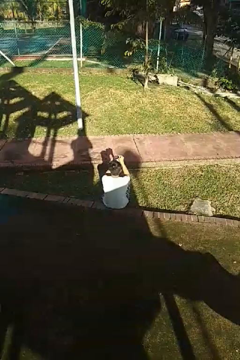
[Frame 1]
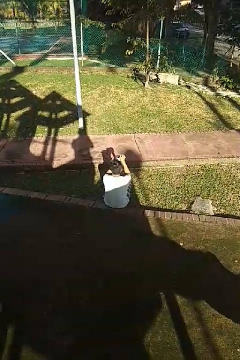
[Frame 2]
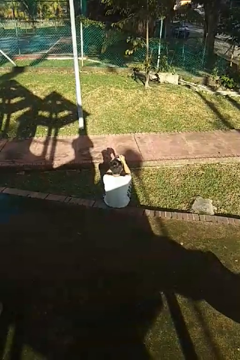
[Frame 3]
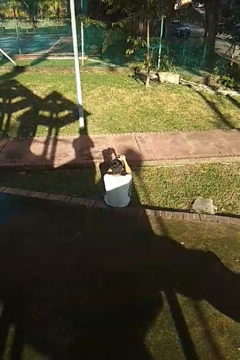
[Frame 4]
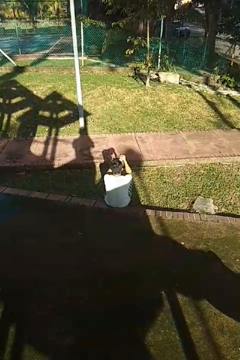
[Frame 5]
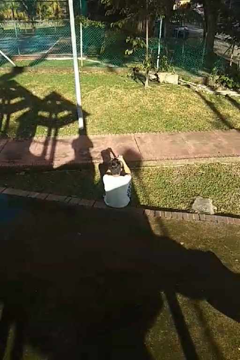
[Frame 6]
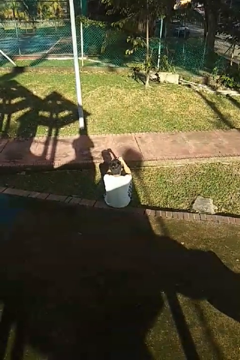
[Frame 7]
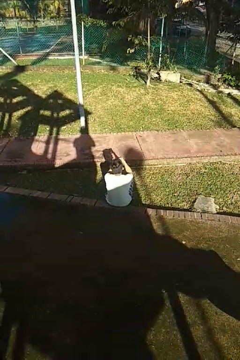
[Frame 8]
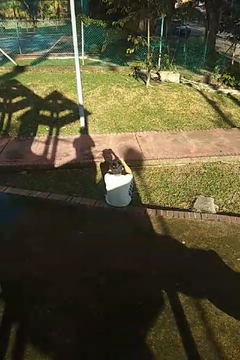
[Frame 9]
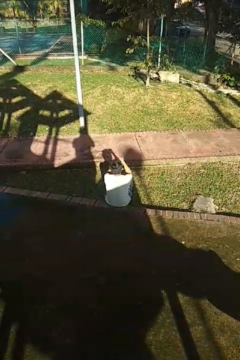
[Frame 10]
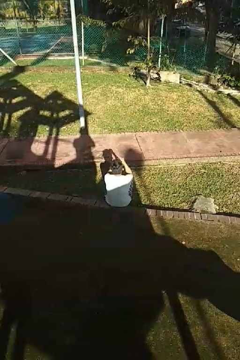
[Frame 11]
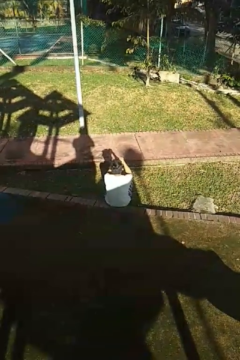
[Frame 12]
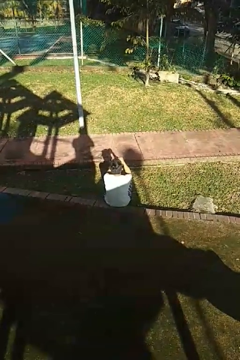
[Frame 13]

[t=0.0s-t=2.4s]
person drinks from mug

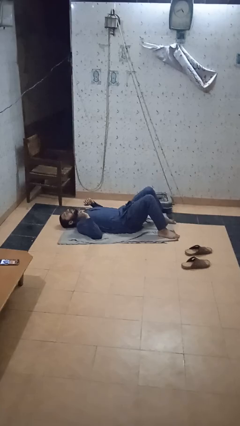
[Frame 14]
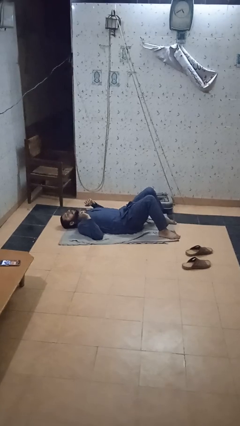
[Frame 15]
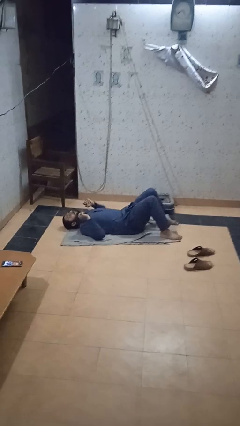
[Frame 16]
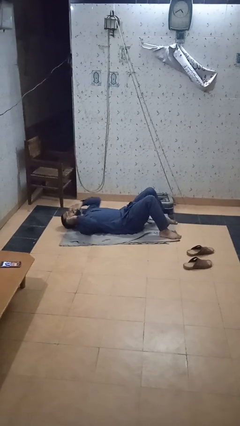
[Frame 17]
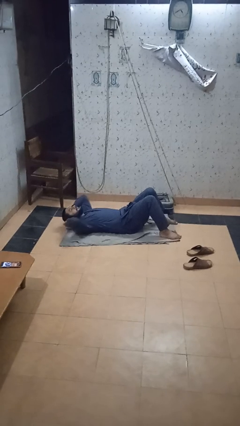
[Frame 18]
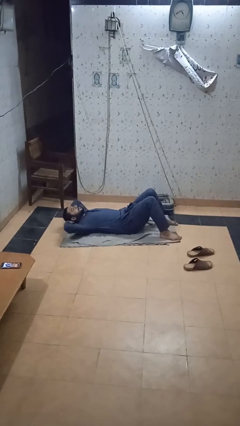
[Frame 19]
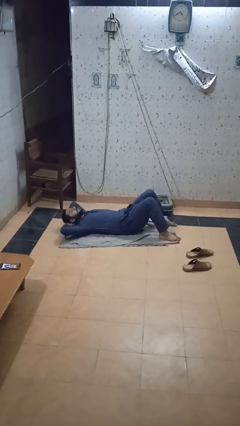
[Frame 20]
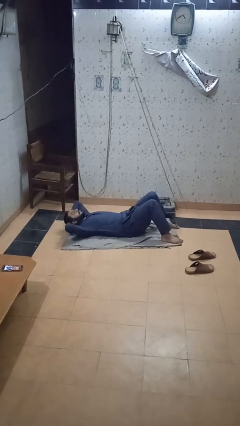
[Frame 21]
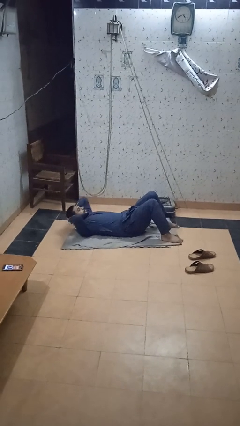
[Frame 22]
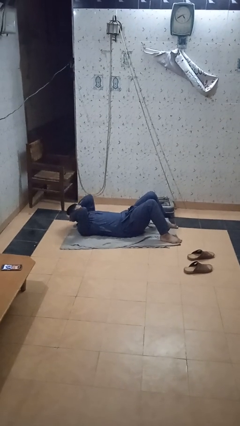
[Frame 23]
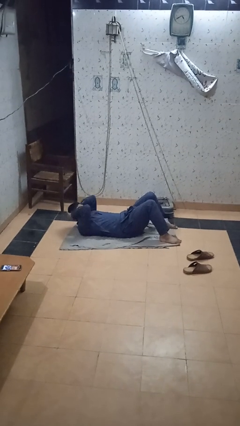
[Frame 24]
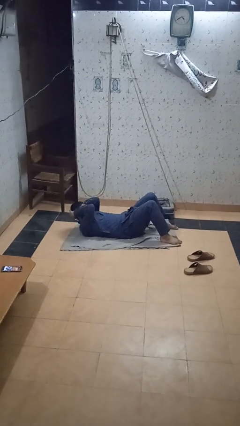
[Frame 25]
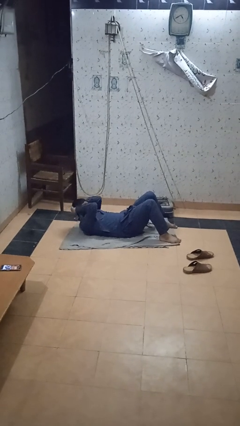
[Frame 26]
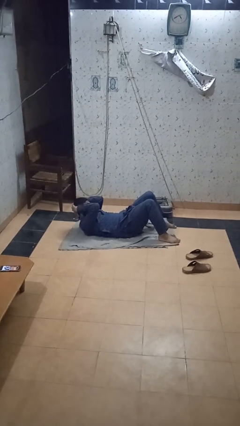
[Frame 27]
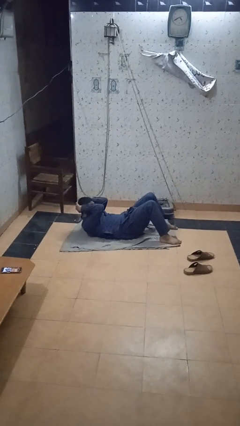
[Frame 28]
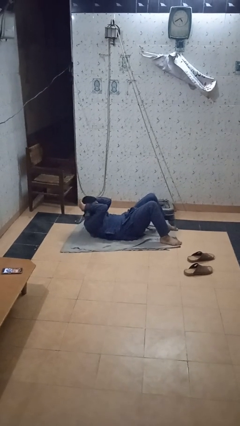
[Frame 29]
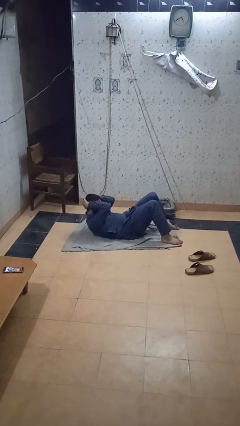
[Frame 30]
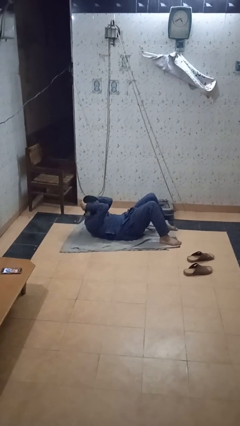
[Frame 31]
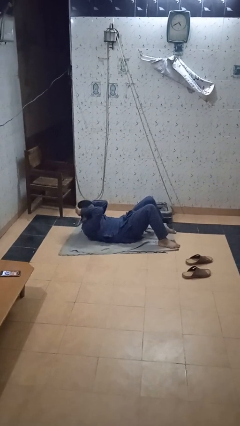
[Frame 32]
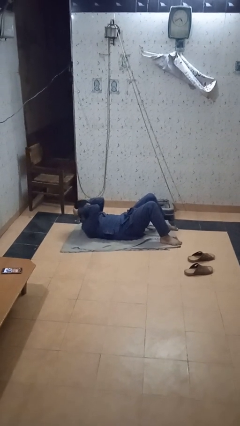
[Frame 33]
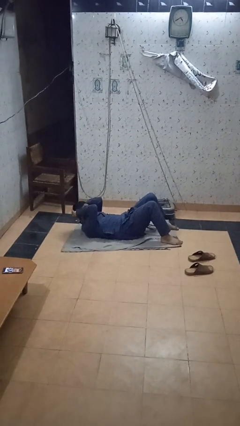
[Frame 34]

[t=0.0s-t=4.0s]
person exercises with situp

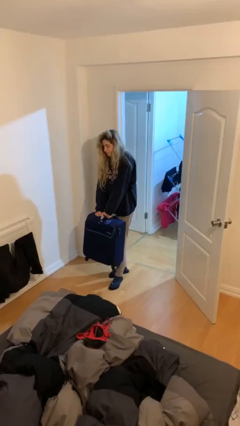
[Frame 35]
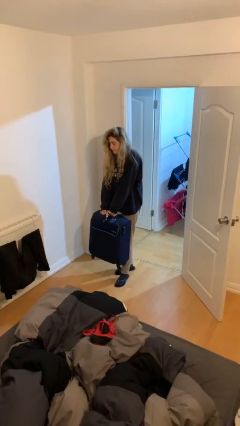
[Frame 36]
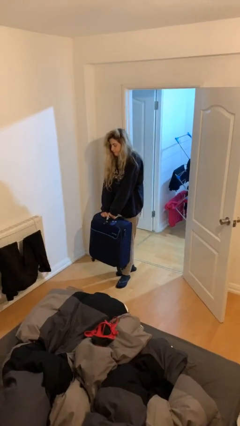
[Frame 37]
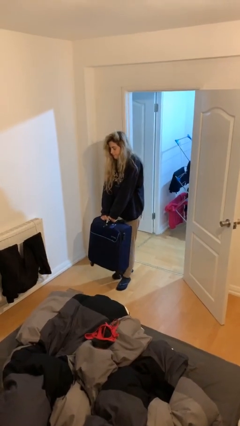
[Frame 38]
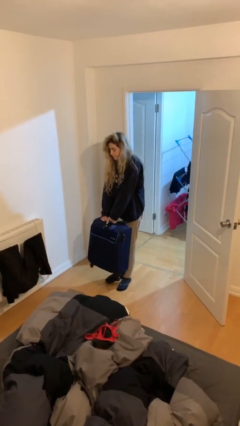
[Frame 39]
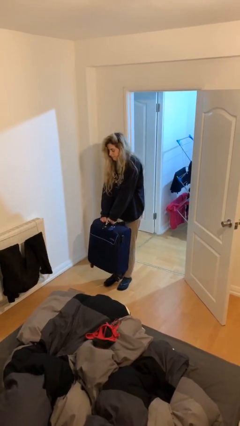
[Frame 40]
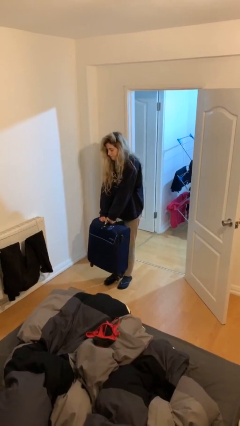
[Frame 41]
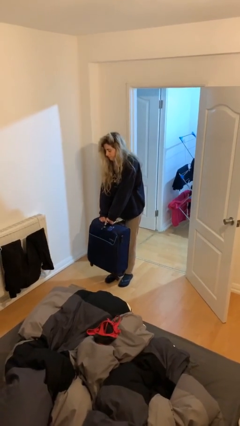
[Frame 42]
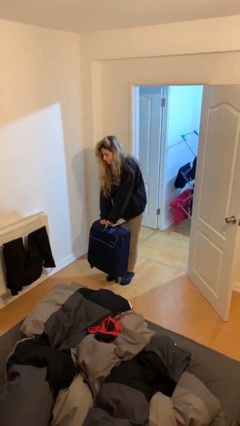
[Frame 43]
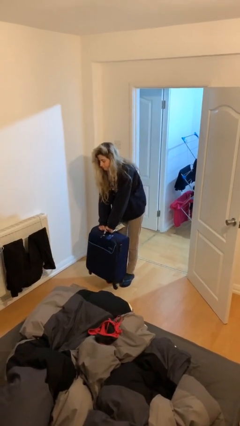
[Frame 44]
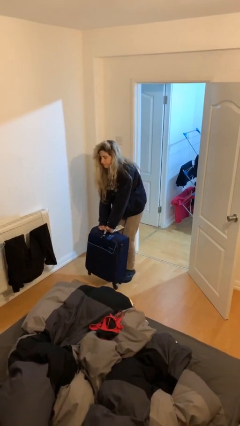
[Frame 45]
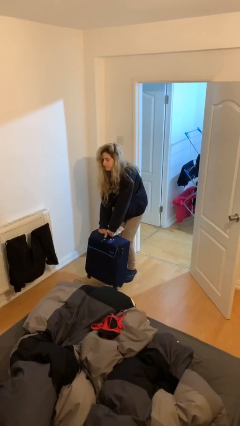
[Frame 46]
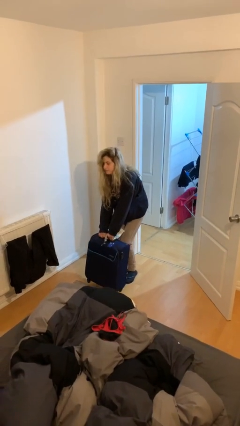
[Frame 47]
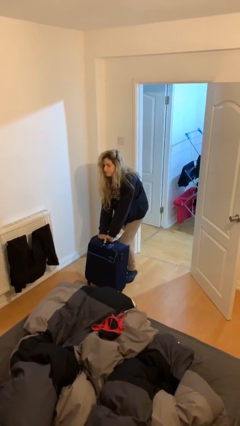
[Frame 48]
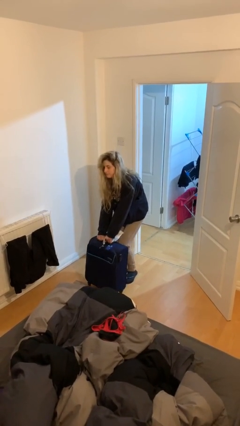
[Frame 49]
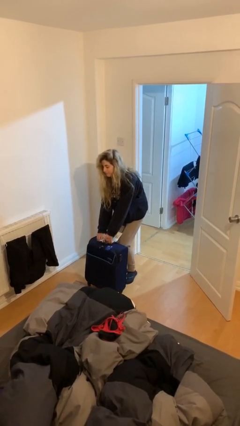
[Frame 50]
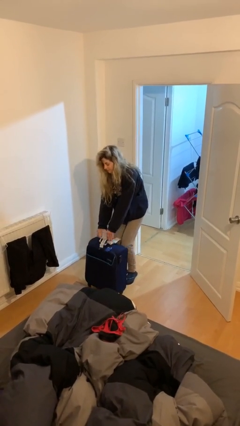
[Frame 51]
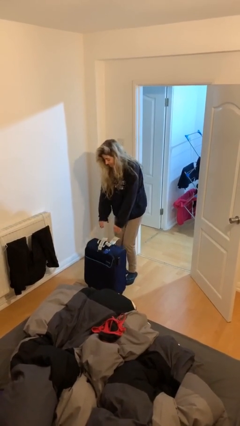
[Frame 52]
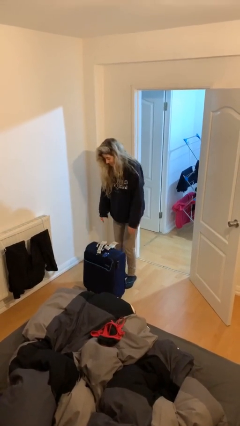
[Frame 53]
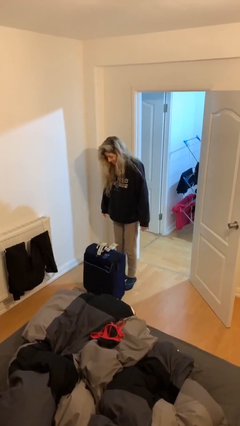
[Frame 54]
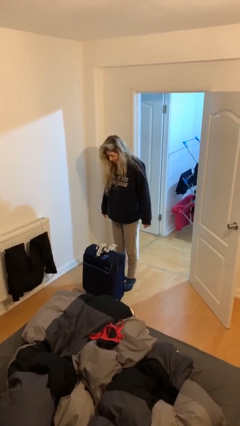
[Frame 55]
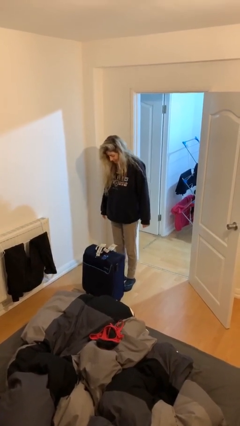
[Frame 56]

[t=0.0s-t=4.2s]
person puts down object on floor

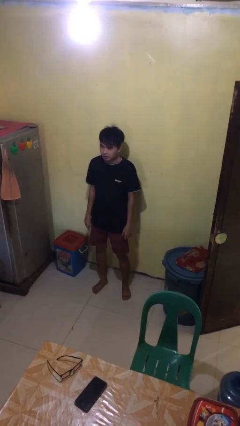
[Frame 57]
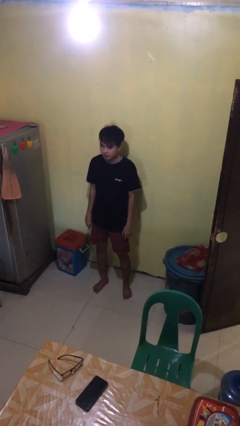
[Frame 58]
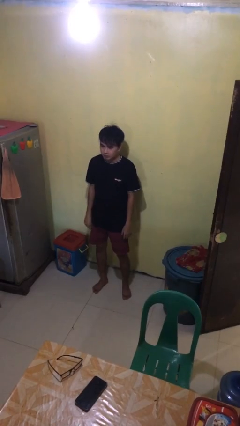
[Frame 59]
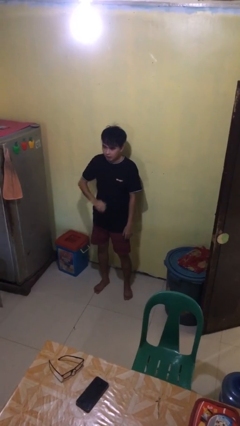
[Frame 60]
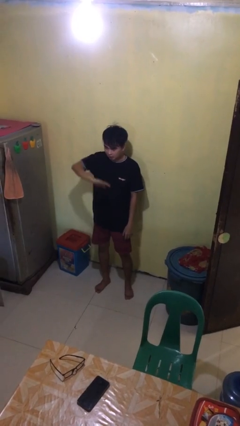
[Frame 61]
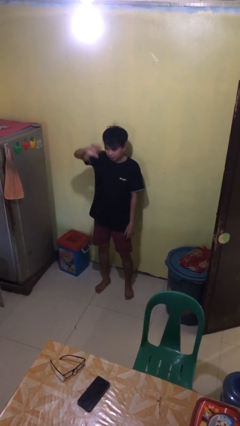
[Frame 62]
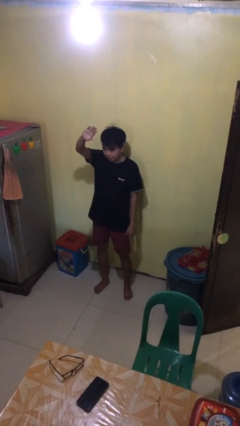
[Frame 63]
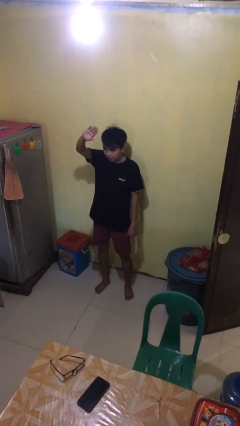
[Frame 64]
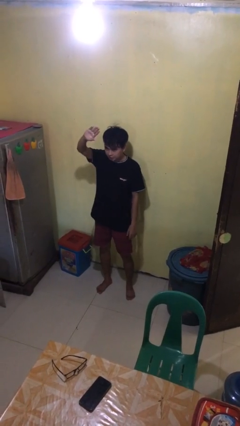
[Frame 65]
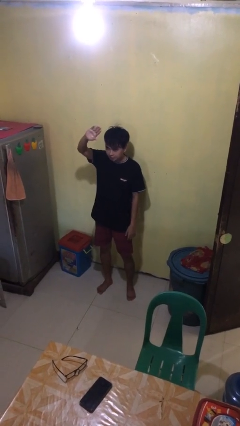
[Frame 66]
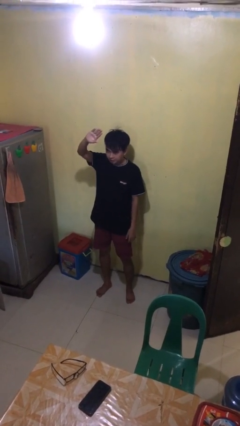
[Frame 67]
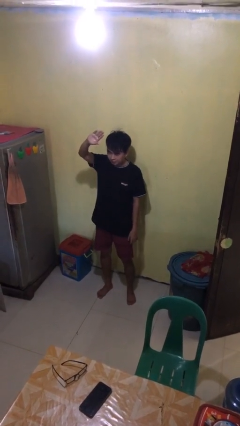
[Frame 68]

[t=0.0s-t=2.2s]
person gestures swipe up

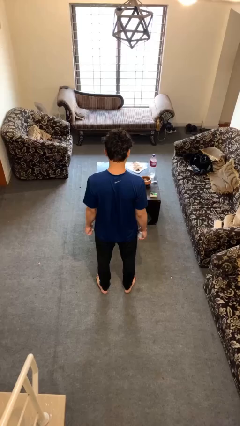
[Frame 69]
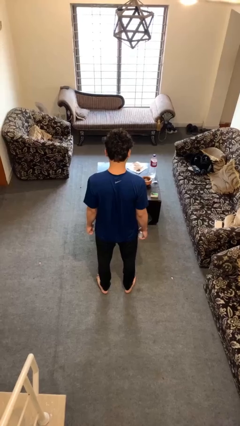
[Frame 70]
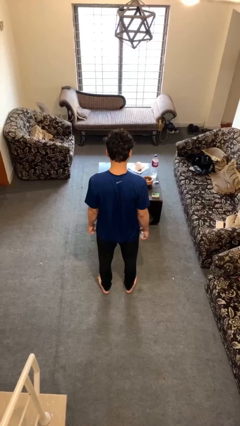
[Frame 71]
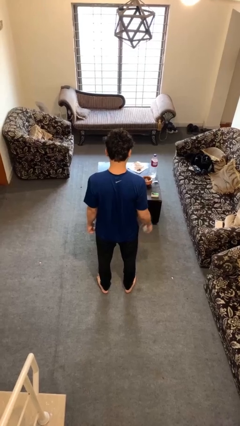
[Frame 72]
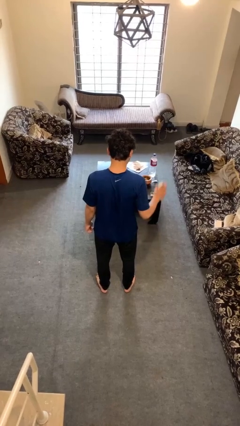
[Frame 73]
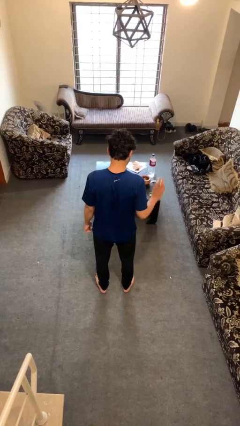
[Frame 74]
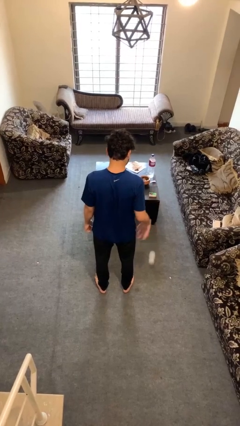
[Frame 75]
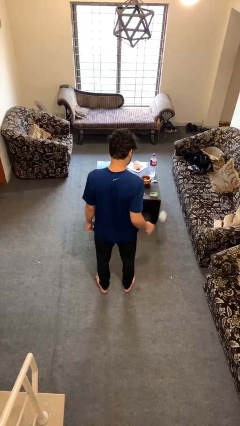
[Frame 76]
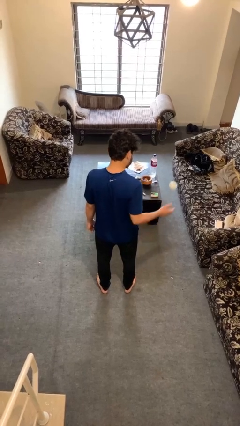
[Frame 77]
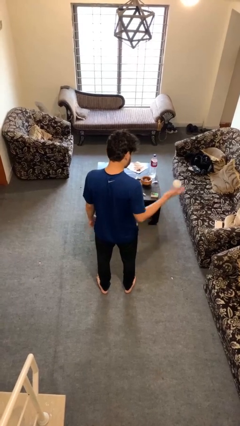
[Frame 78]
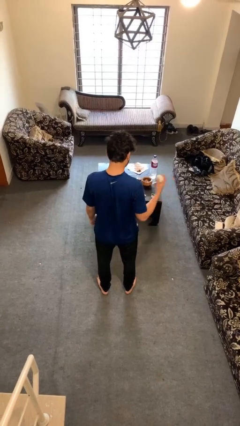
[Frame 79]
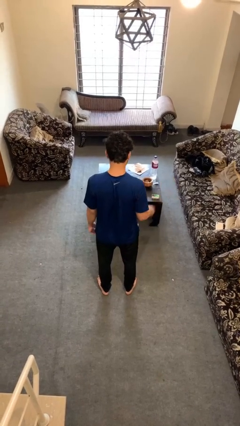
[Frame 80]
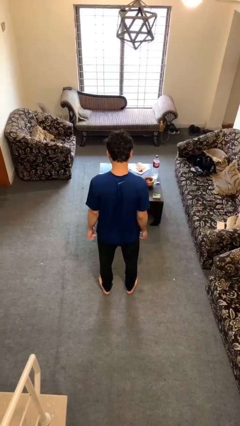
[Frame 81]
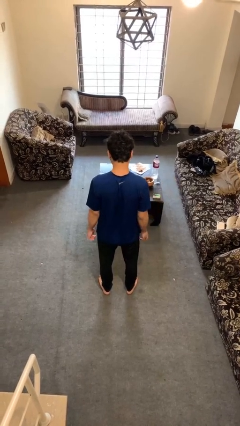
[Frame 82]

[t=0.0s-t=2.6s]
person bounces ball on floor

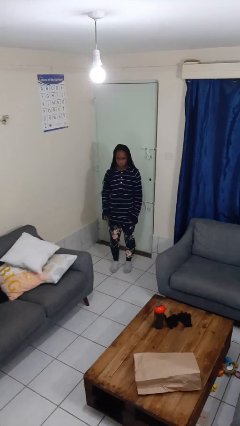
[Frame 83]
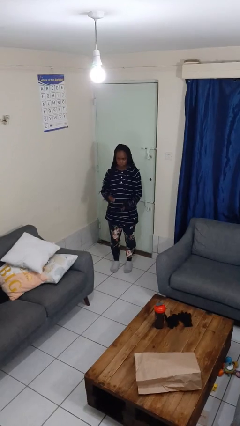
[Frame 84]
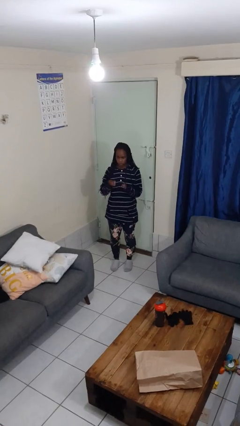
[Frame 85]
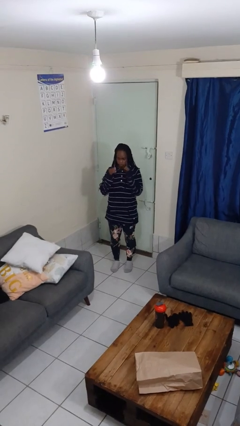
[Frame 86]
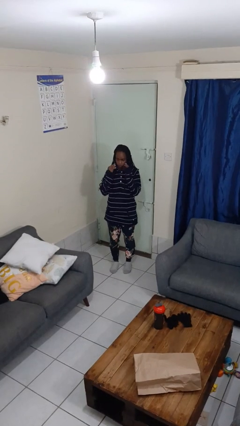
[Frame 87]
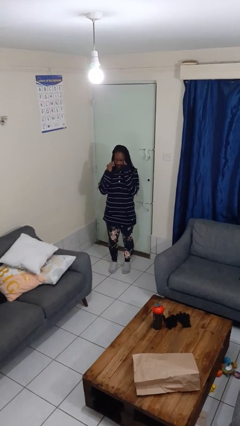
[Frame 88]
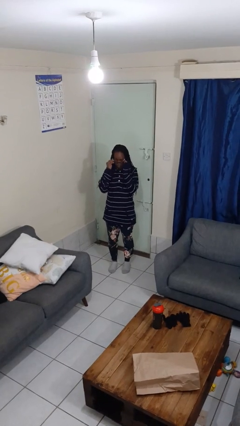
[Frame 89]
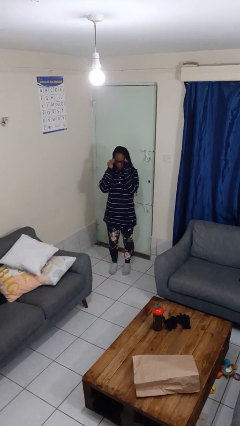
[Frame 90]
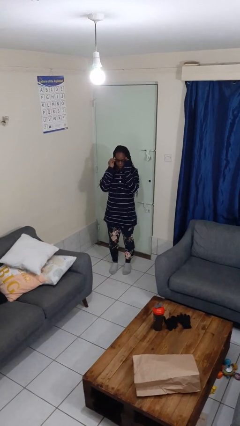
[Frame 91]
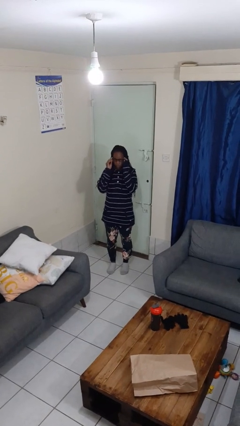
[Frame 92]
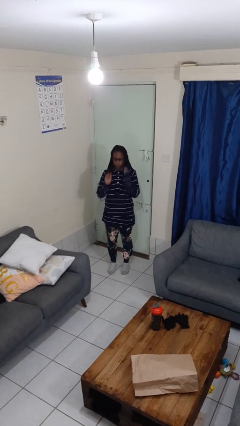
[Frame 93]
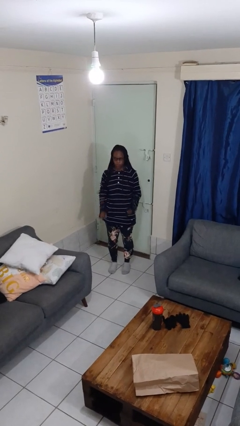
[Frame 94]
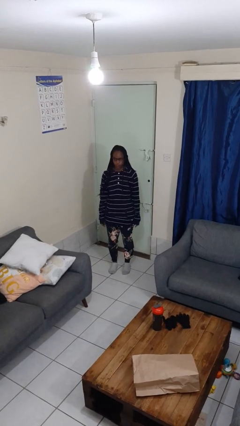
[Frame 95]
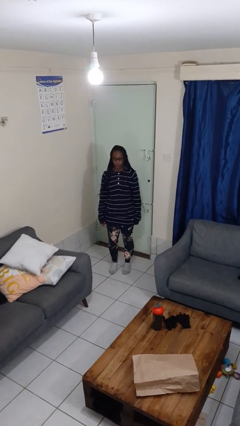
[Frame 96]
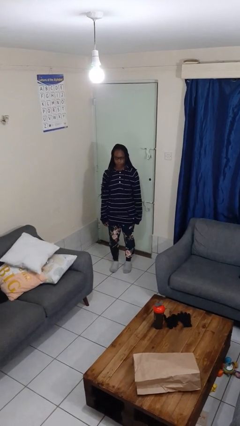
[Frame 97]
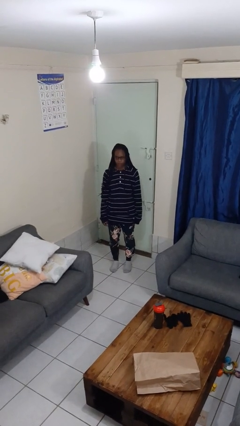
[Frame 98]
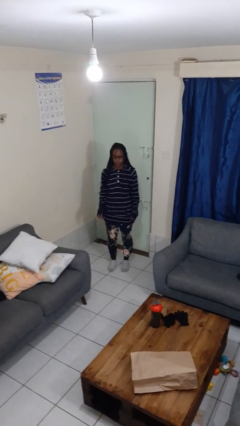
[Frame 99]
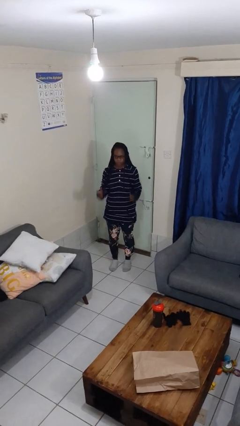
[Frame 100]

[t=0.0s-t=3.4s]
person puts on glasses
